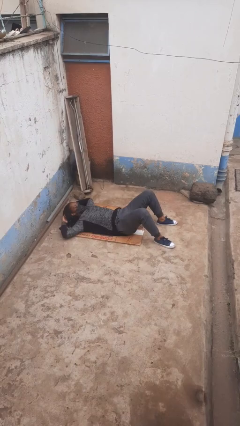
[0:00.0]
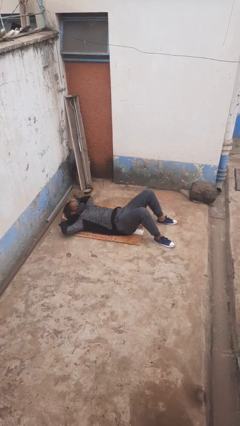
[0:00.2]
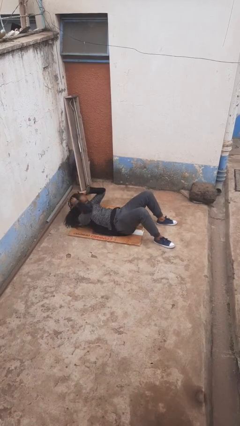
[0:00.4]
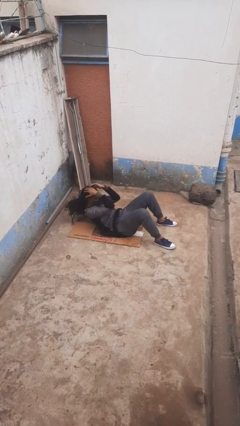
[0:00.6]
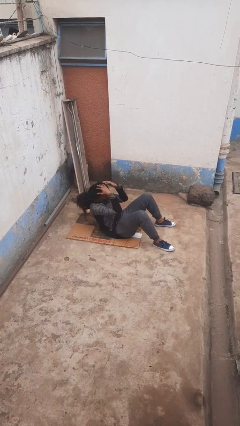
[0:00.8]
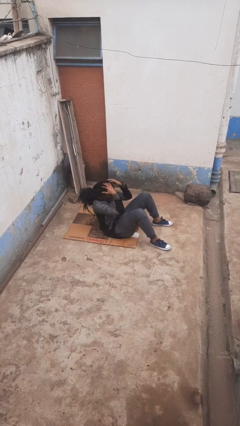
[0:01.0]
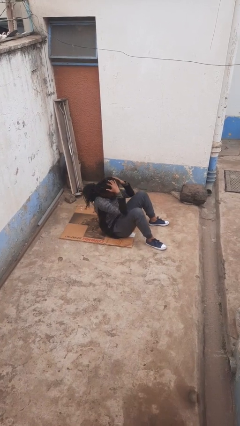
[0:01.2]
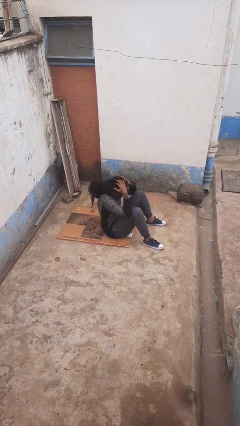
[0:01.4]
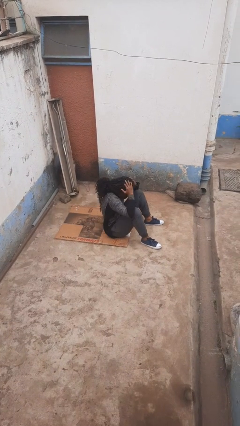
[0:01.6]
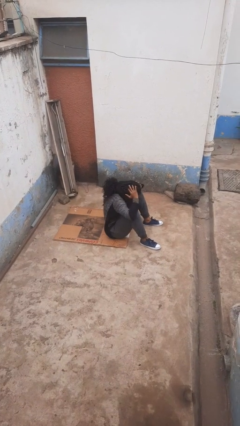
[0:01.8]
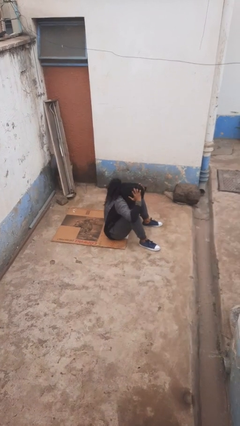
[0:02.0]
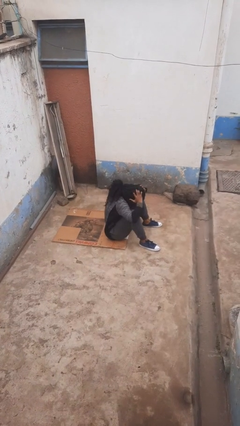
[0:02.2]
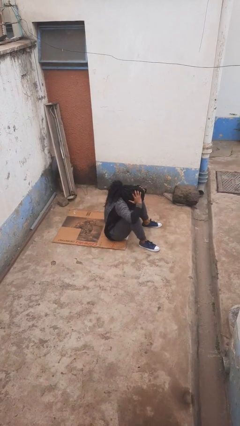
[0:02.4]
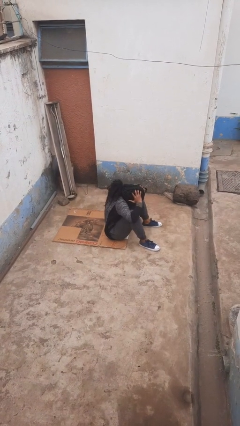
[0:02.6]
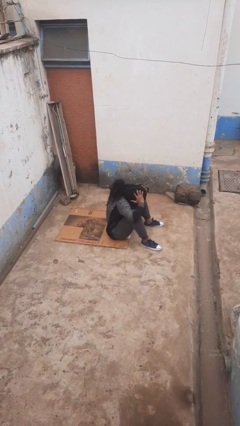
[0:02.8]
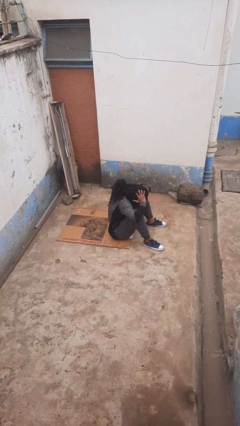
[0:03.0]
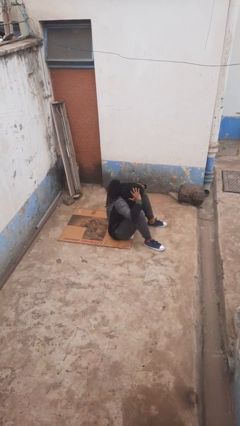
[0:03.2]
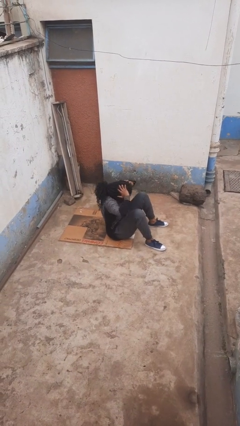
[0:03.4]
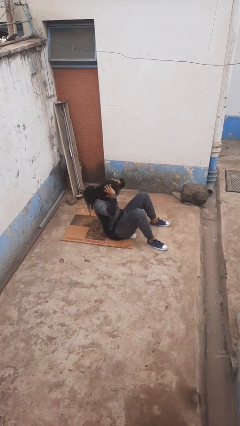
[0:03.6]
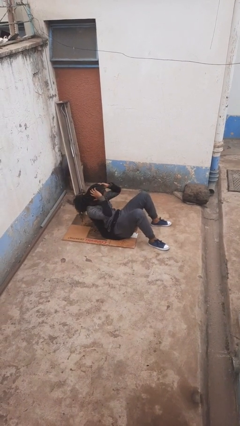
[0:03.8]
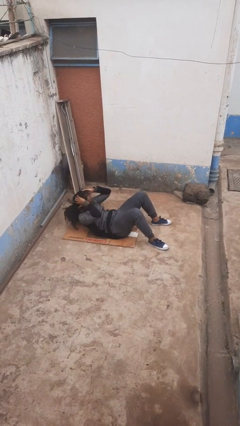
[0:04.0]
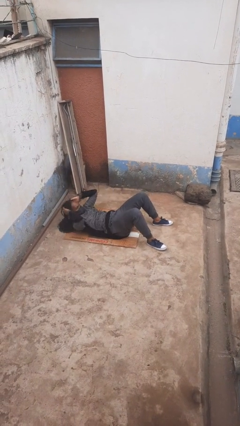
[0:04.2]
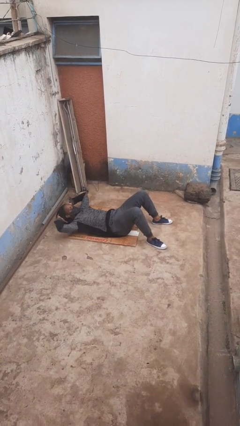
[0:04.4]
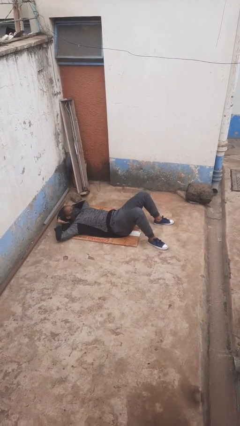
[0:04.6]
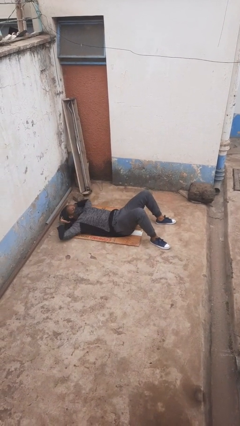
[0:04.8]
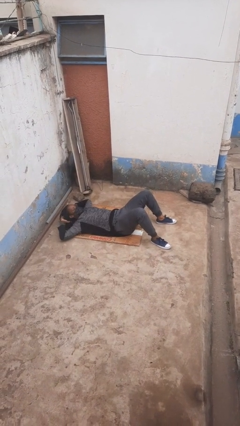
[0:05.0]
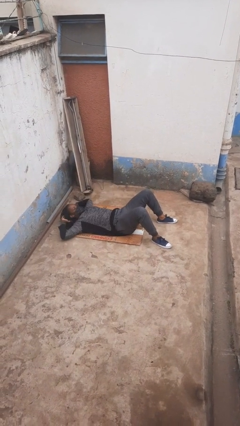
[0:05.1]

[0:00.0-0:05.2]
person exercises with situp

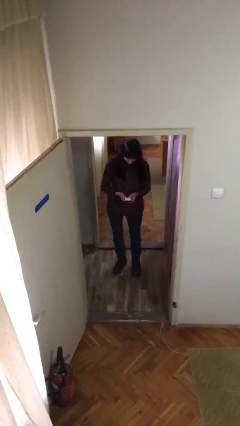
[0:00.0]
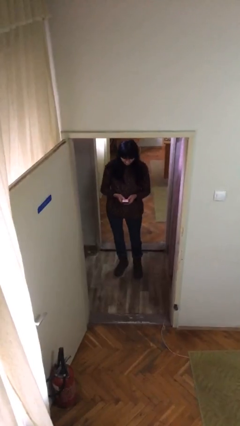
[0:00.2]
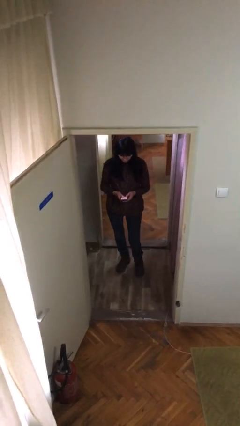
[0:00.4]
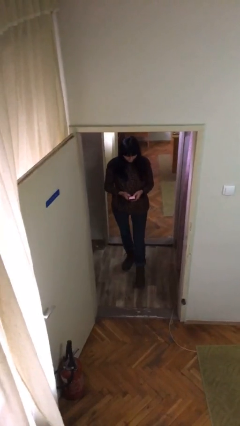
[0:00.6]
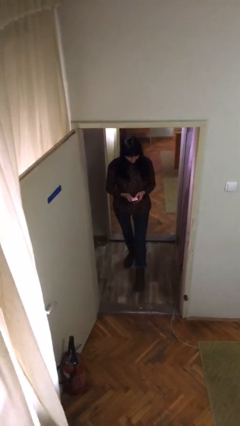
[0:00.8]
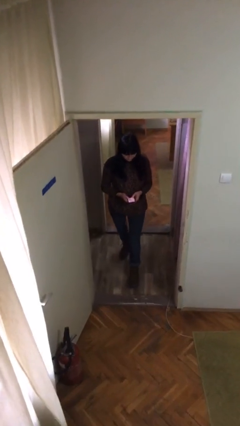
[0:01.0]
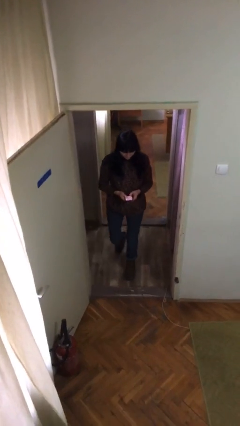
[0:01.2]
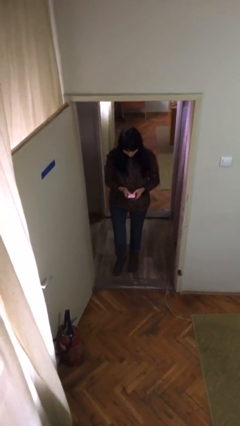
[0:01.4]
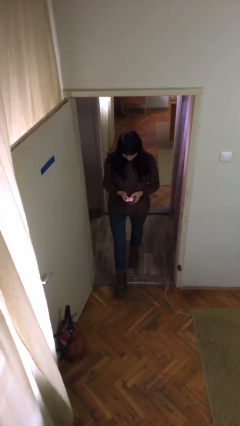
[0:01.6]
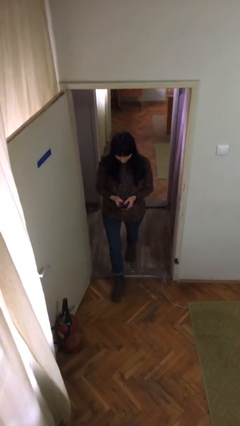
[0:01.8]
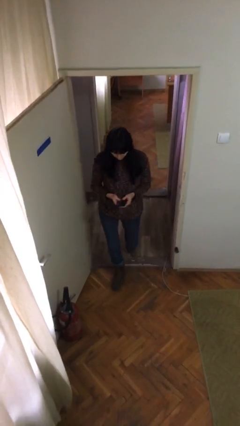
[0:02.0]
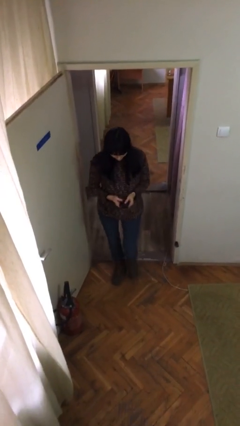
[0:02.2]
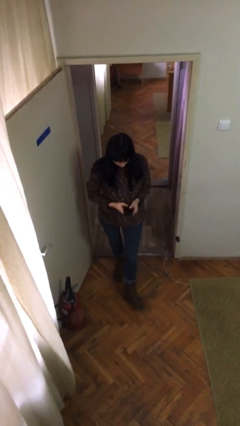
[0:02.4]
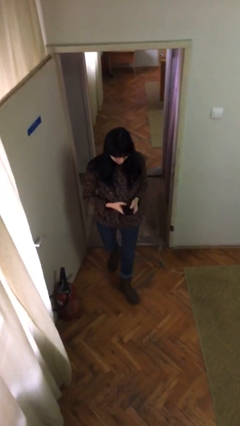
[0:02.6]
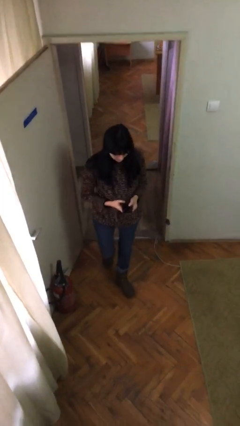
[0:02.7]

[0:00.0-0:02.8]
person enters scene through structure

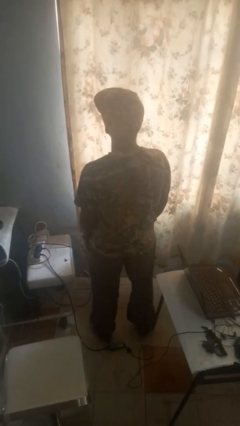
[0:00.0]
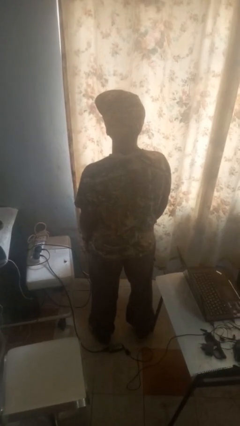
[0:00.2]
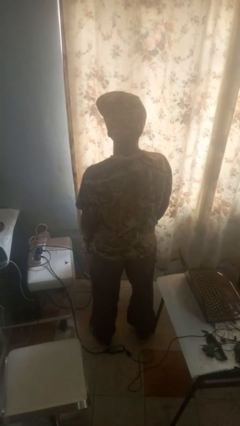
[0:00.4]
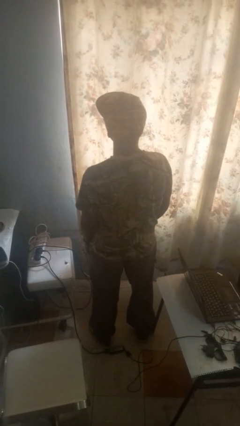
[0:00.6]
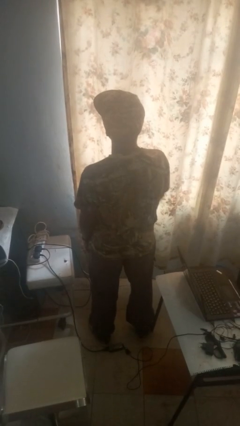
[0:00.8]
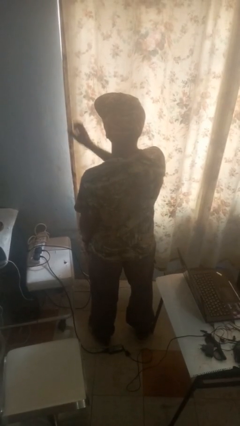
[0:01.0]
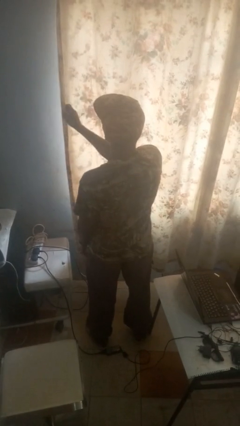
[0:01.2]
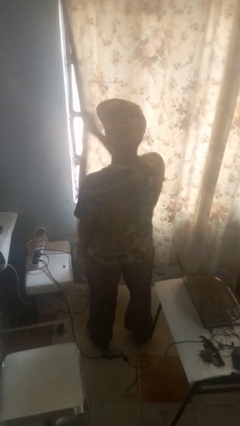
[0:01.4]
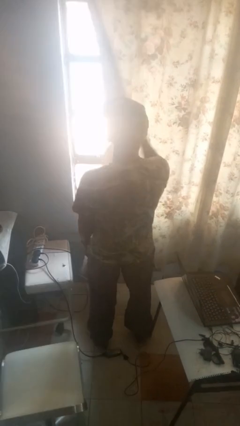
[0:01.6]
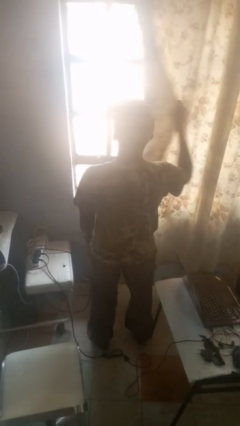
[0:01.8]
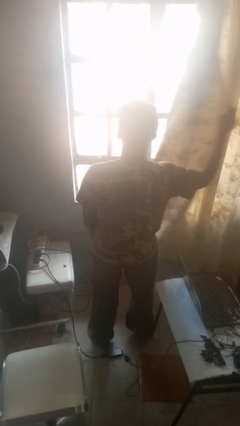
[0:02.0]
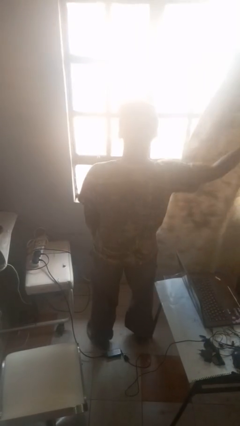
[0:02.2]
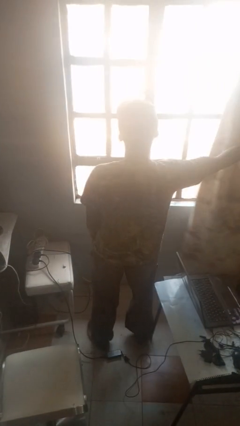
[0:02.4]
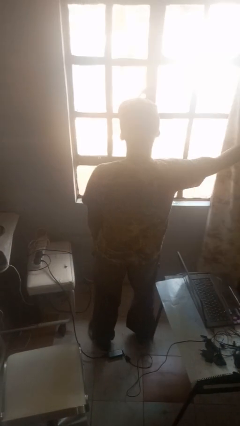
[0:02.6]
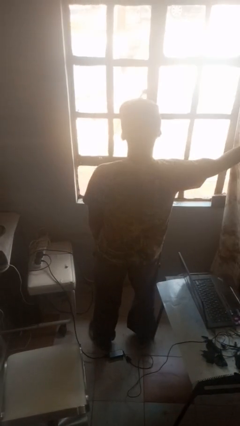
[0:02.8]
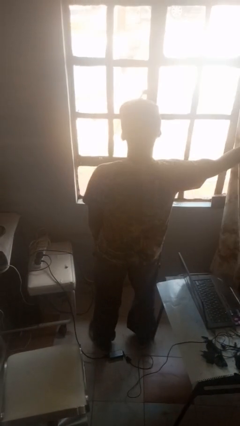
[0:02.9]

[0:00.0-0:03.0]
person opens curtains

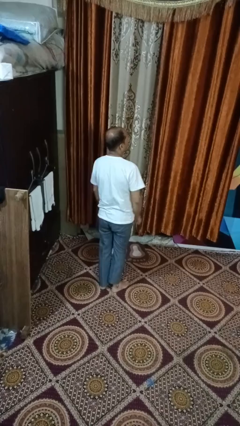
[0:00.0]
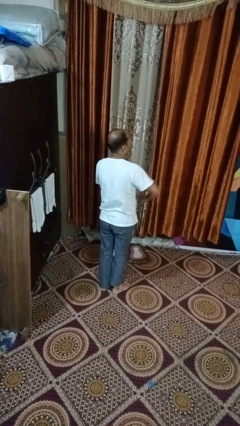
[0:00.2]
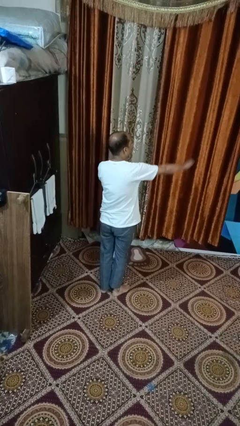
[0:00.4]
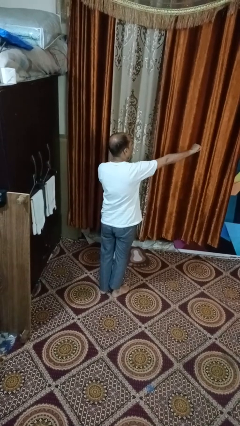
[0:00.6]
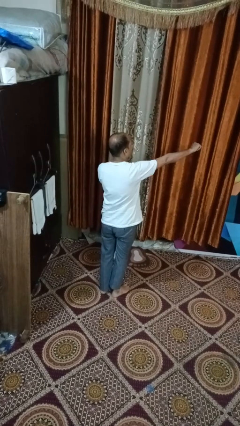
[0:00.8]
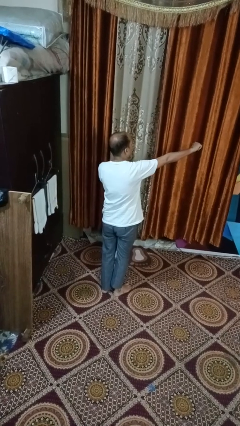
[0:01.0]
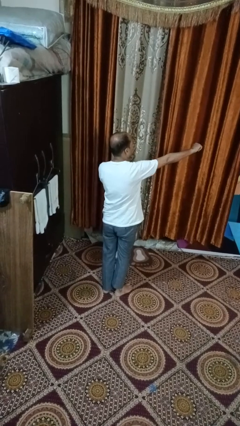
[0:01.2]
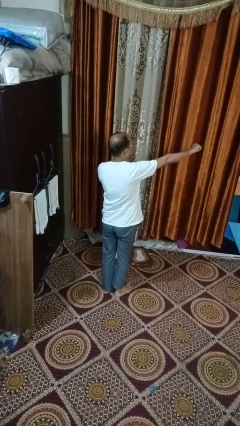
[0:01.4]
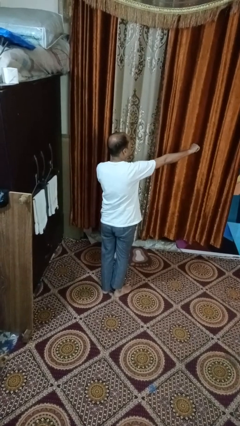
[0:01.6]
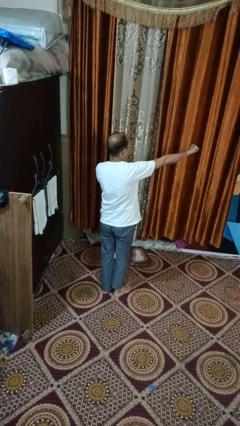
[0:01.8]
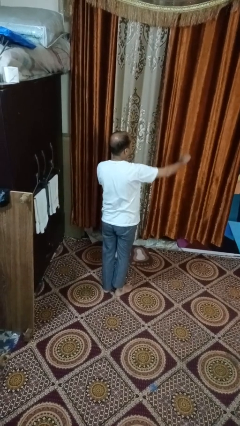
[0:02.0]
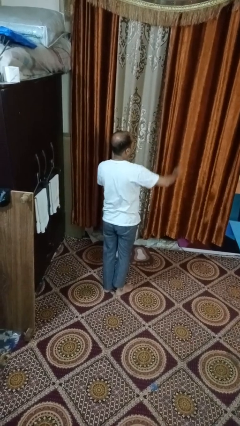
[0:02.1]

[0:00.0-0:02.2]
person karate chop

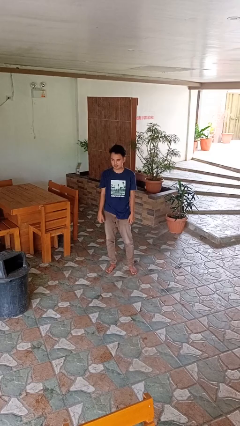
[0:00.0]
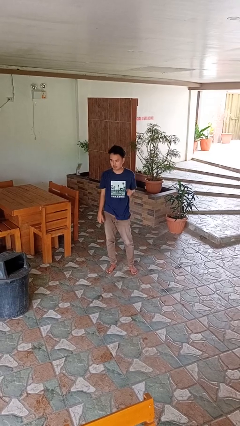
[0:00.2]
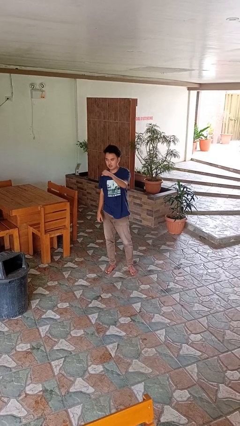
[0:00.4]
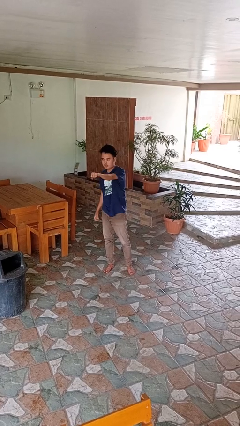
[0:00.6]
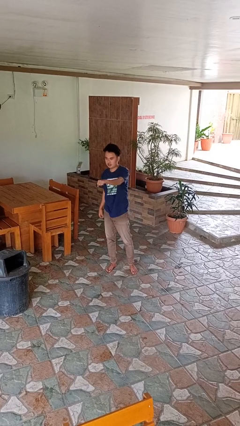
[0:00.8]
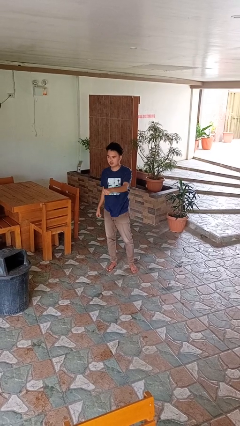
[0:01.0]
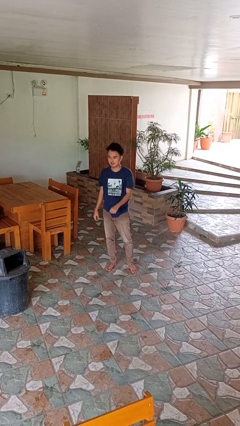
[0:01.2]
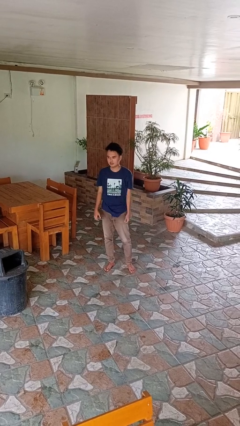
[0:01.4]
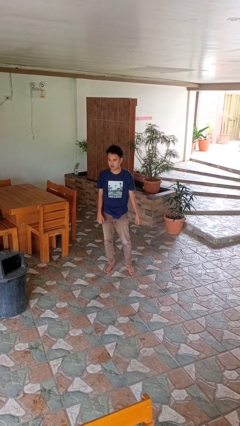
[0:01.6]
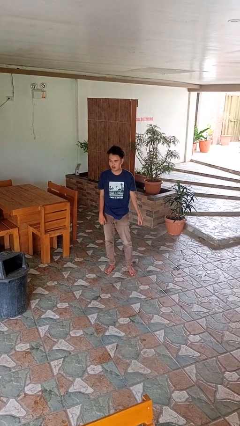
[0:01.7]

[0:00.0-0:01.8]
person punches

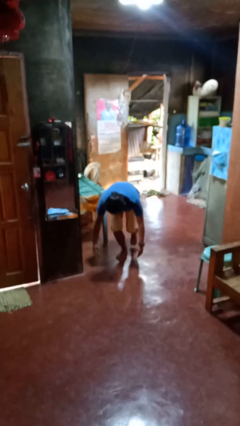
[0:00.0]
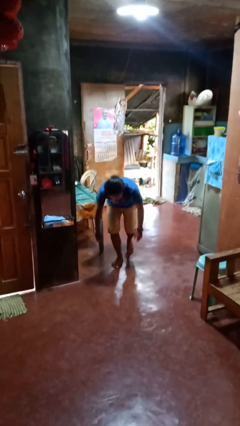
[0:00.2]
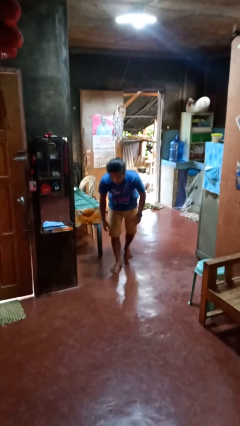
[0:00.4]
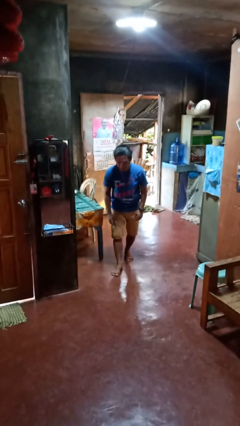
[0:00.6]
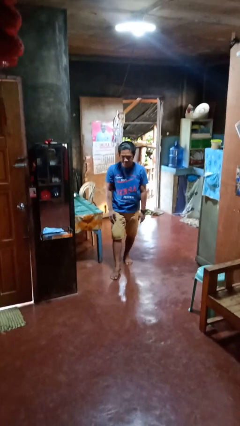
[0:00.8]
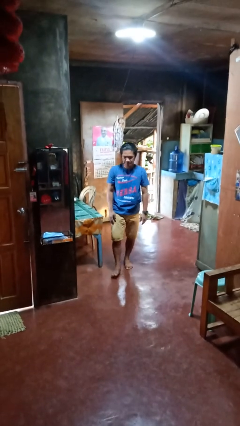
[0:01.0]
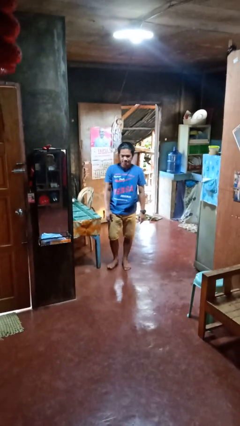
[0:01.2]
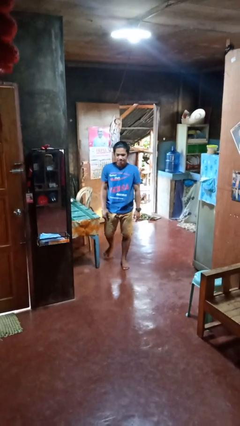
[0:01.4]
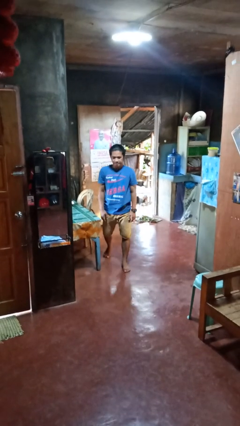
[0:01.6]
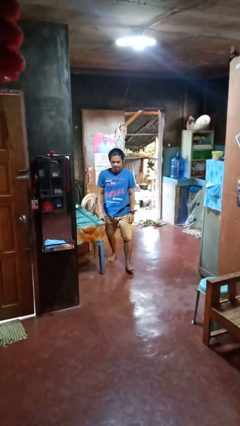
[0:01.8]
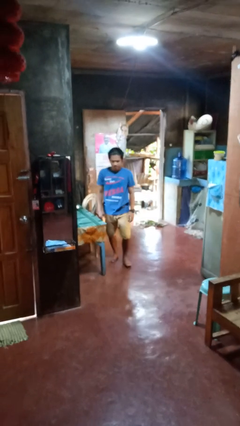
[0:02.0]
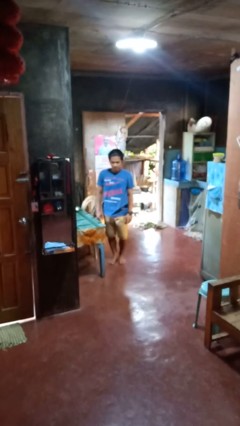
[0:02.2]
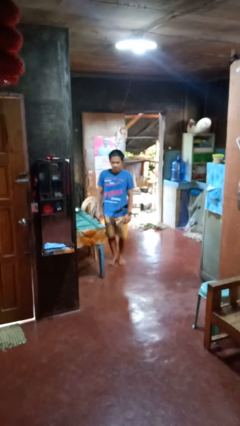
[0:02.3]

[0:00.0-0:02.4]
person stands up from floor
